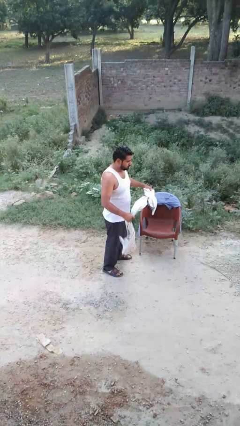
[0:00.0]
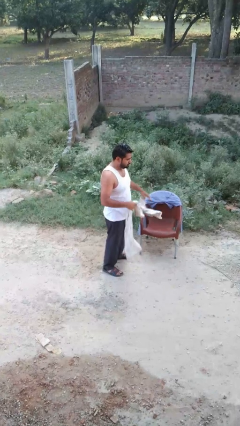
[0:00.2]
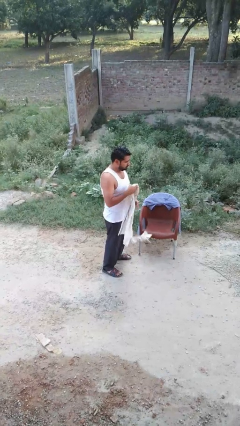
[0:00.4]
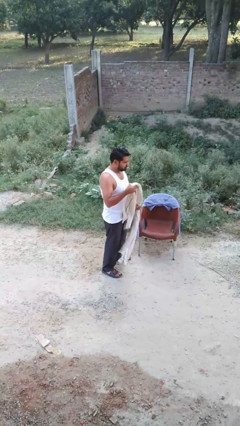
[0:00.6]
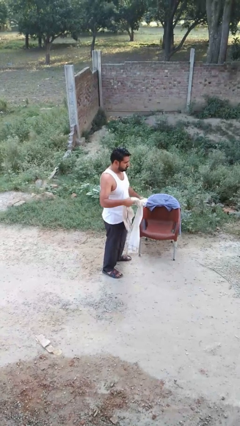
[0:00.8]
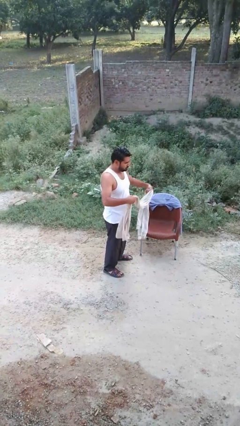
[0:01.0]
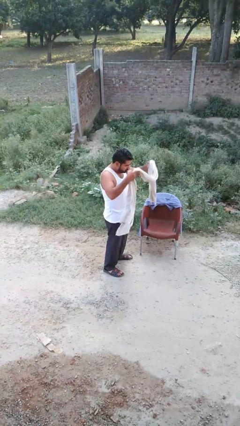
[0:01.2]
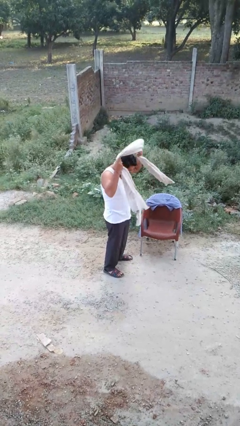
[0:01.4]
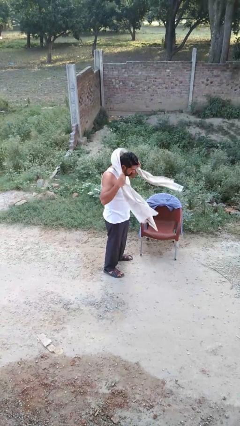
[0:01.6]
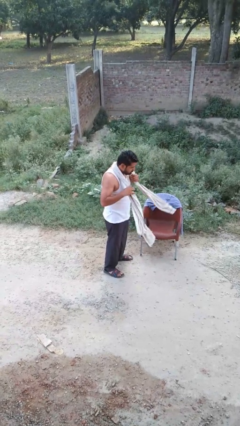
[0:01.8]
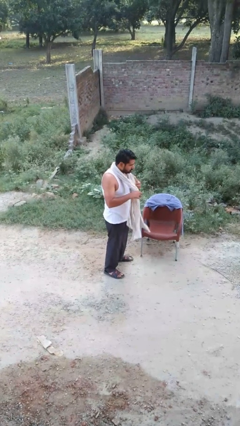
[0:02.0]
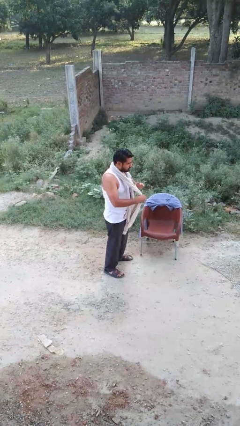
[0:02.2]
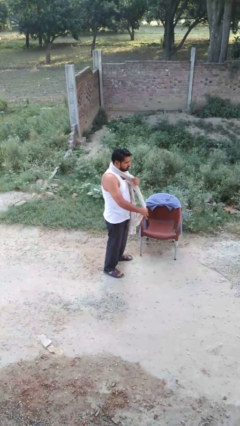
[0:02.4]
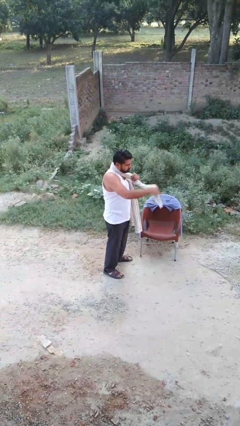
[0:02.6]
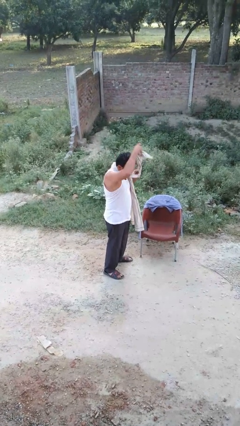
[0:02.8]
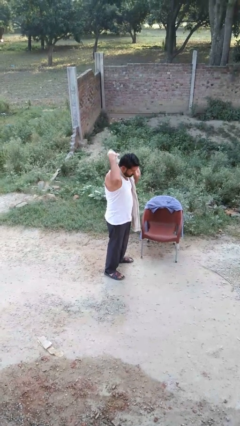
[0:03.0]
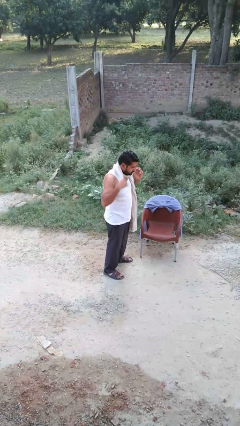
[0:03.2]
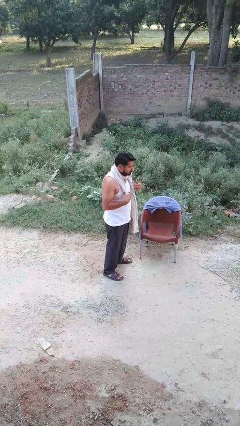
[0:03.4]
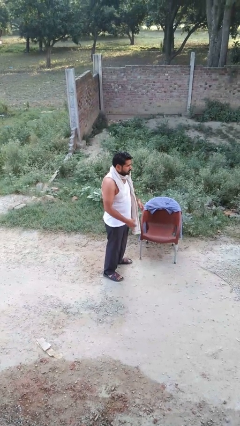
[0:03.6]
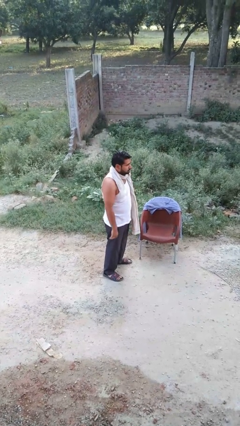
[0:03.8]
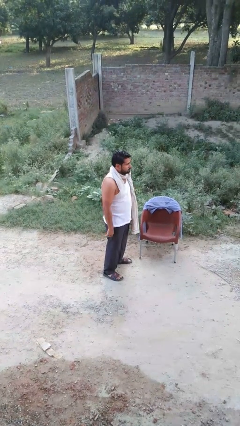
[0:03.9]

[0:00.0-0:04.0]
person puts on scarf

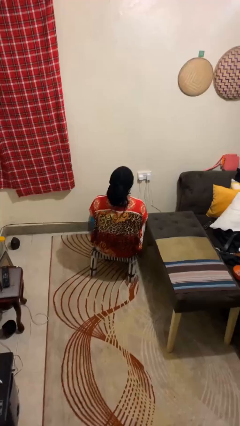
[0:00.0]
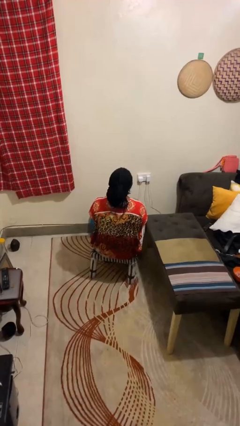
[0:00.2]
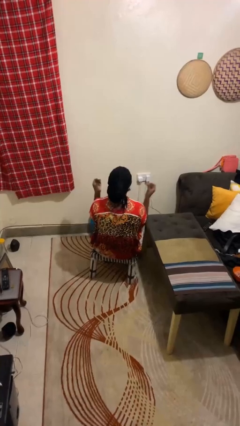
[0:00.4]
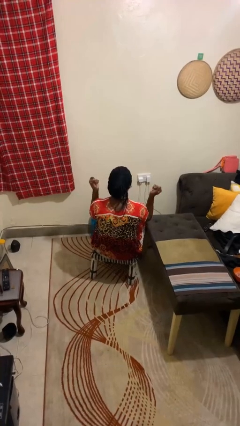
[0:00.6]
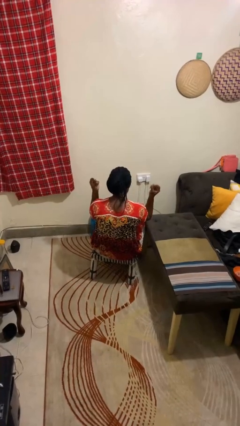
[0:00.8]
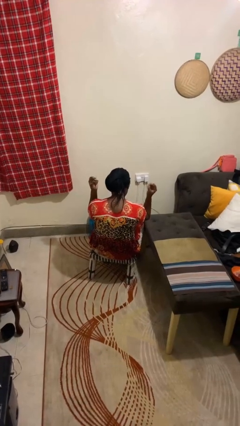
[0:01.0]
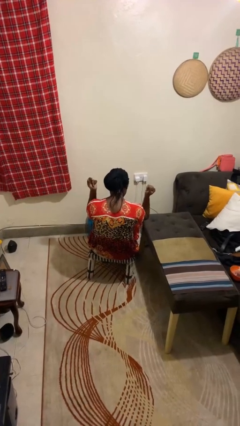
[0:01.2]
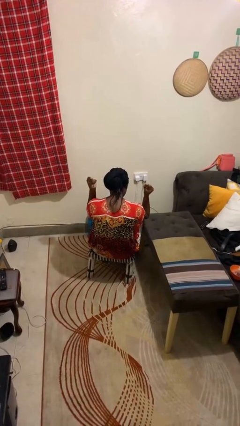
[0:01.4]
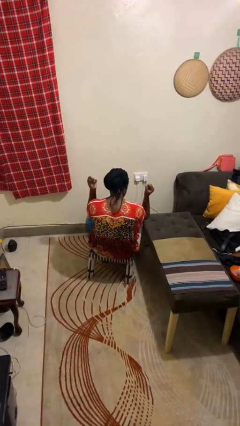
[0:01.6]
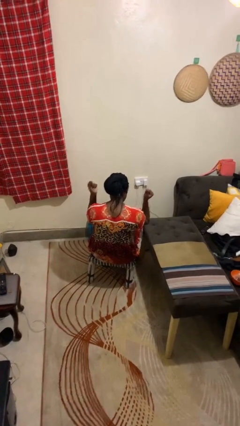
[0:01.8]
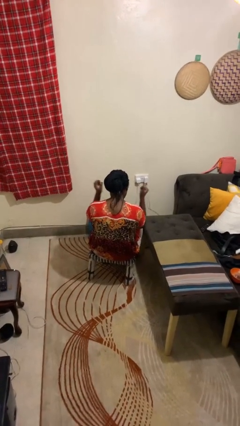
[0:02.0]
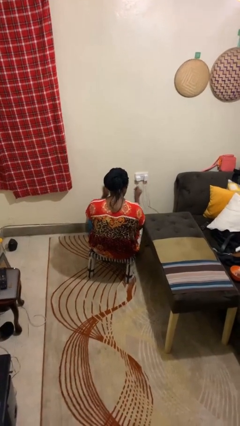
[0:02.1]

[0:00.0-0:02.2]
person snaps fingers

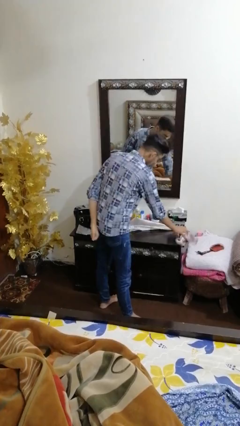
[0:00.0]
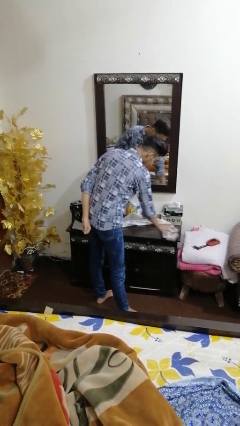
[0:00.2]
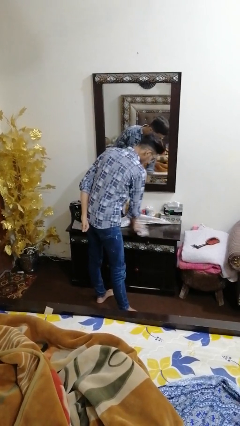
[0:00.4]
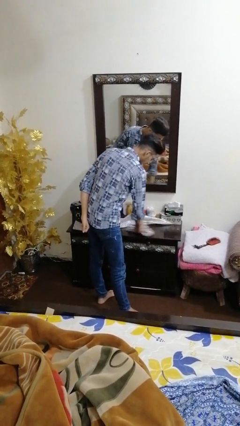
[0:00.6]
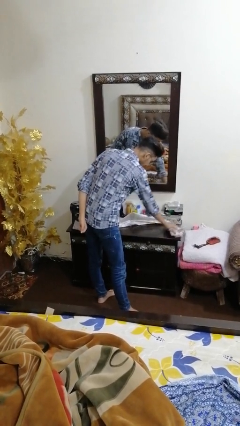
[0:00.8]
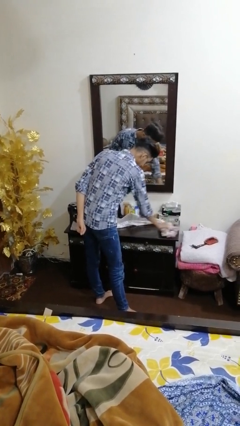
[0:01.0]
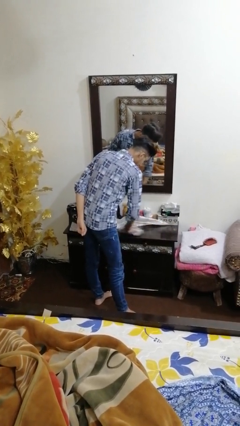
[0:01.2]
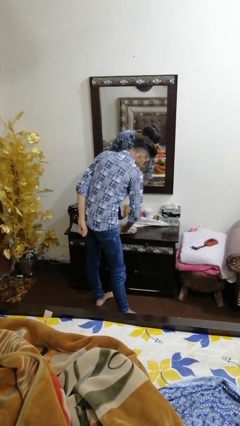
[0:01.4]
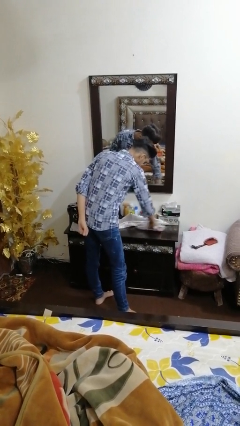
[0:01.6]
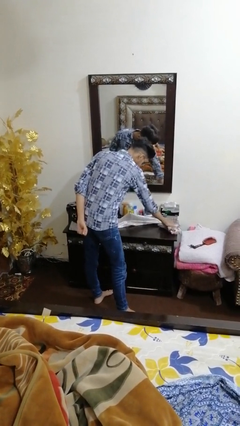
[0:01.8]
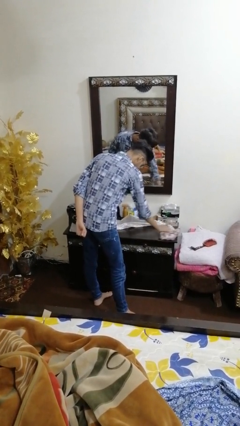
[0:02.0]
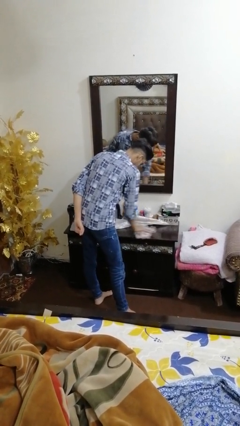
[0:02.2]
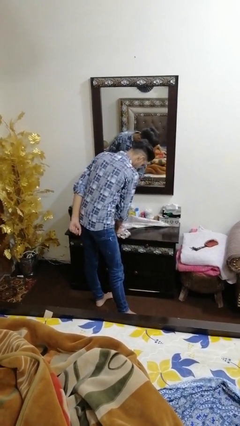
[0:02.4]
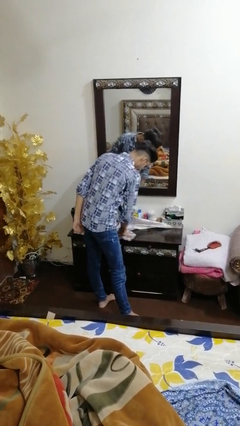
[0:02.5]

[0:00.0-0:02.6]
person cleans table with rag

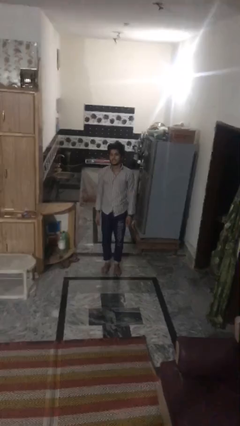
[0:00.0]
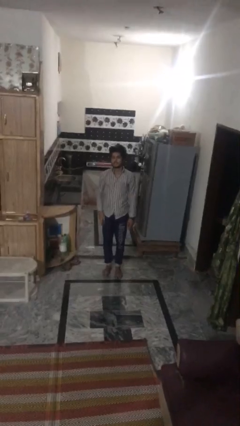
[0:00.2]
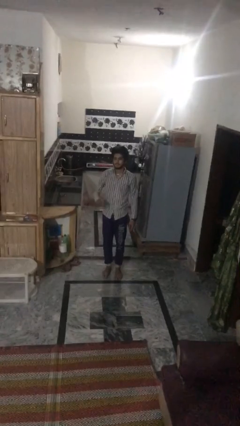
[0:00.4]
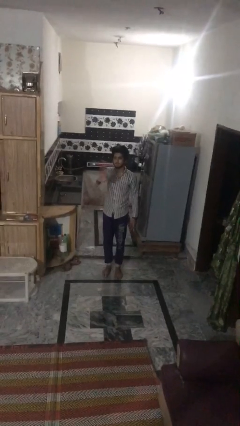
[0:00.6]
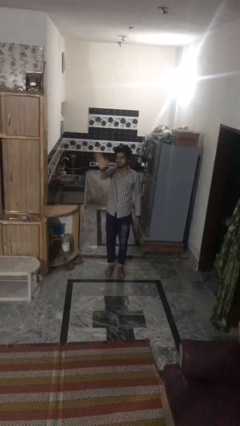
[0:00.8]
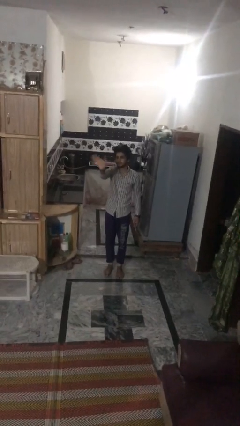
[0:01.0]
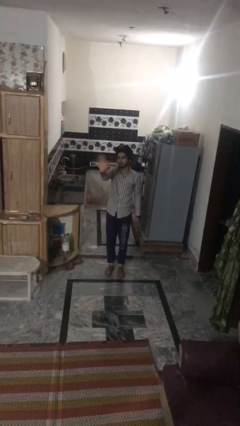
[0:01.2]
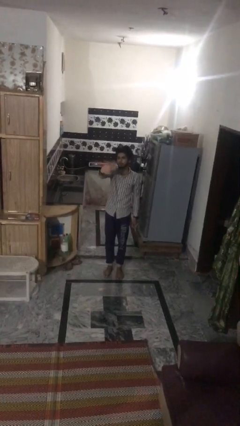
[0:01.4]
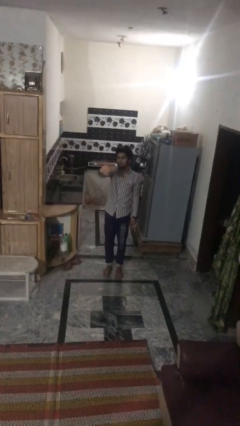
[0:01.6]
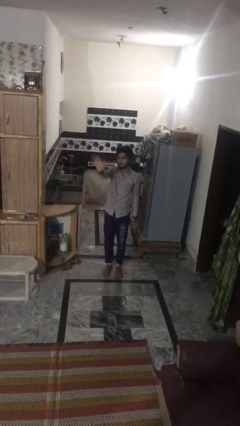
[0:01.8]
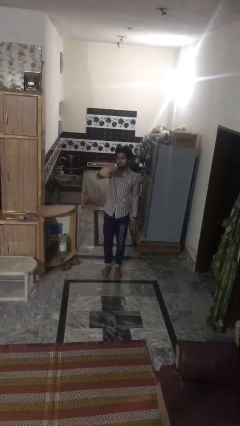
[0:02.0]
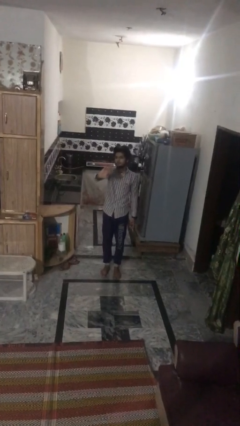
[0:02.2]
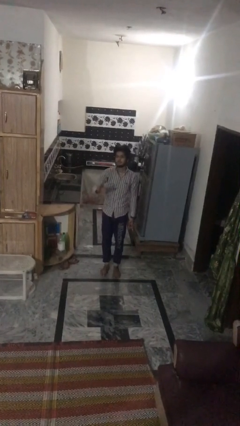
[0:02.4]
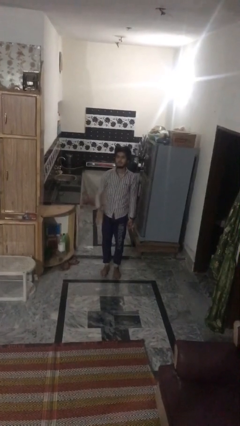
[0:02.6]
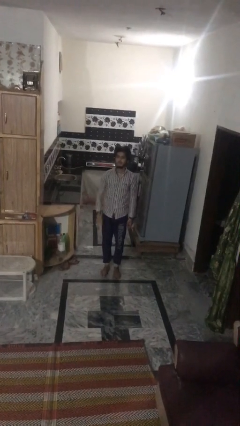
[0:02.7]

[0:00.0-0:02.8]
person waves at person

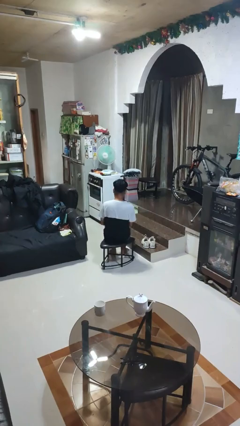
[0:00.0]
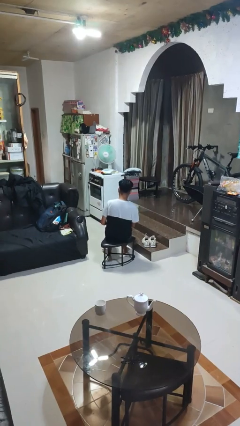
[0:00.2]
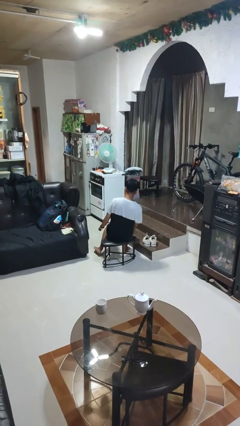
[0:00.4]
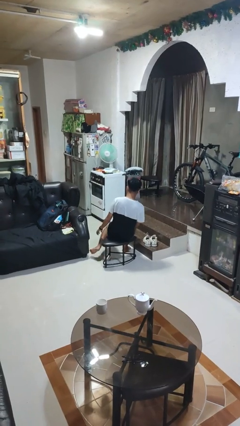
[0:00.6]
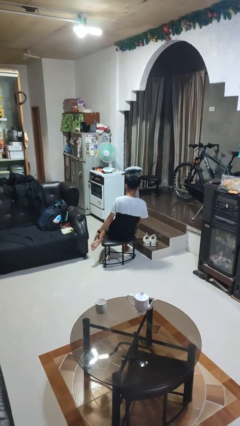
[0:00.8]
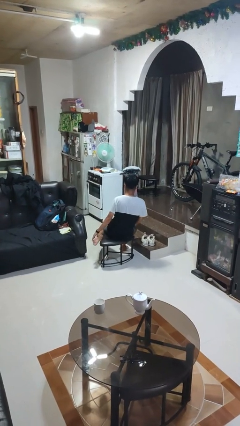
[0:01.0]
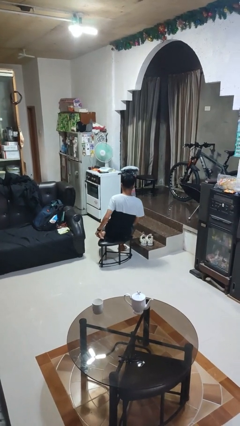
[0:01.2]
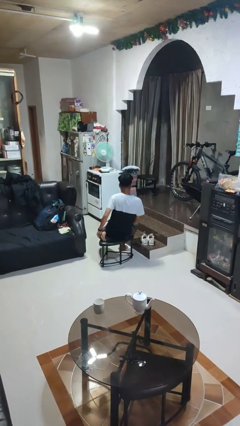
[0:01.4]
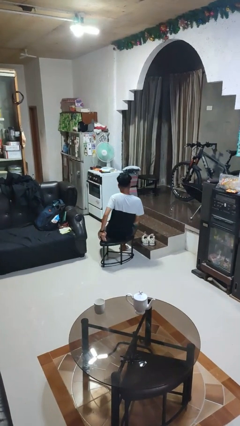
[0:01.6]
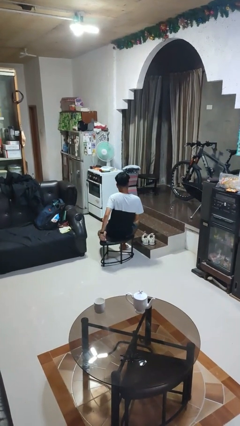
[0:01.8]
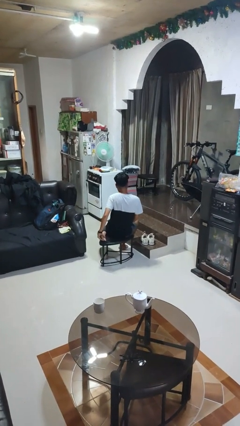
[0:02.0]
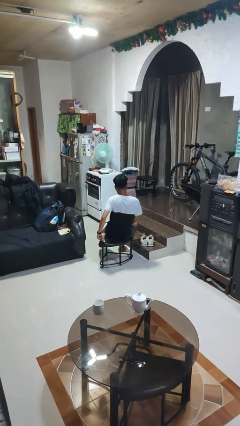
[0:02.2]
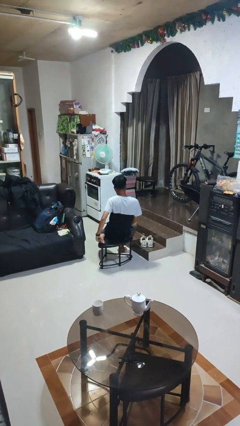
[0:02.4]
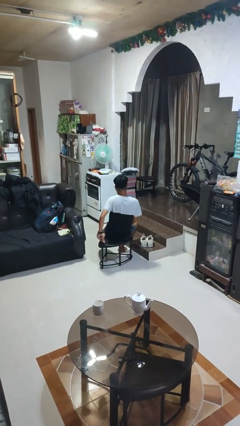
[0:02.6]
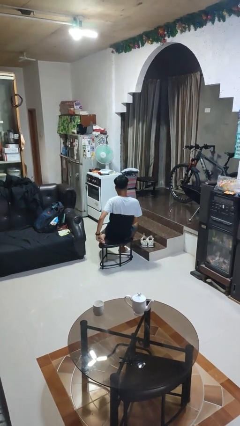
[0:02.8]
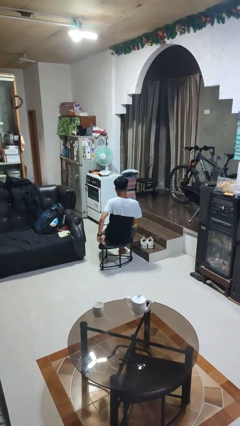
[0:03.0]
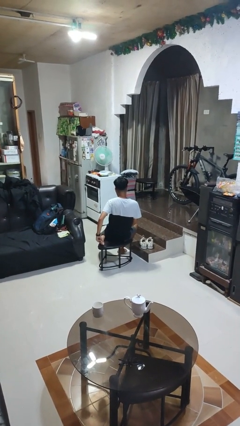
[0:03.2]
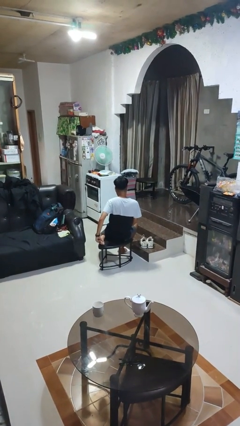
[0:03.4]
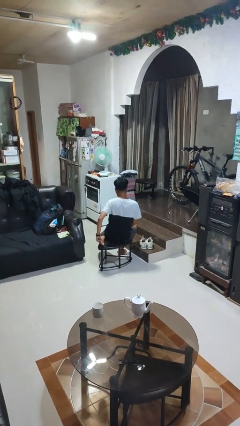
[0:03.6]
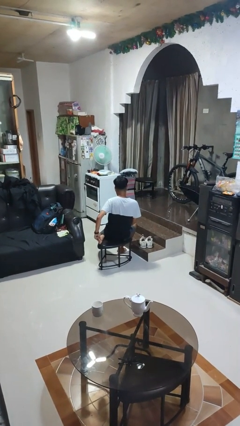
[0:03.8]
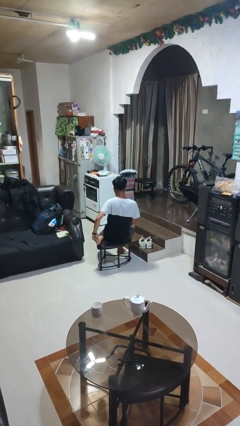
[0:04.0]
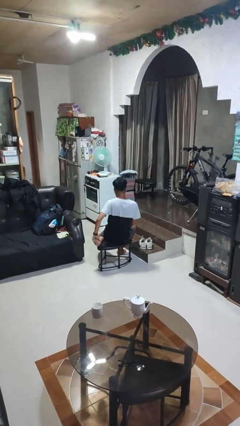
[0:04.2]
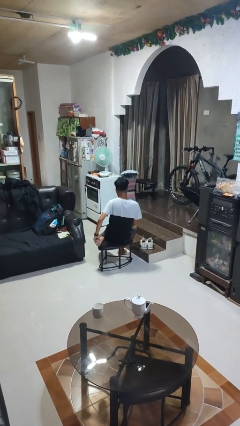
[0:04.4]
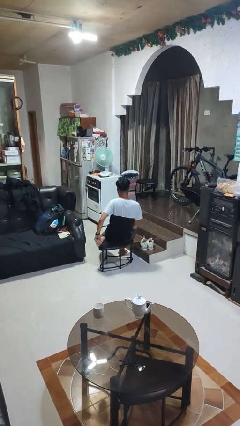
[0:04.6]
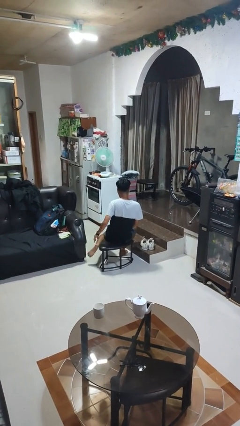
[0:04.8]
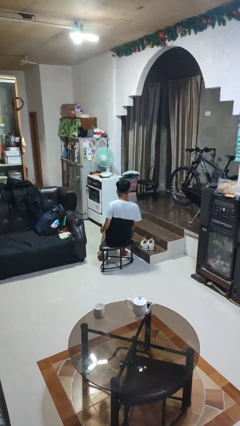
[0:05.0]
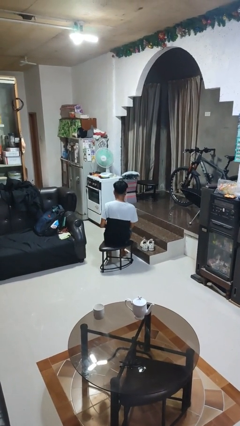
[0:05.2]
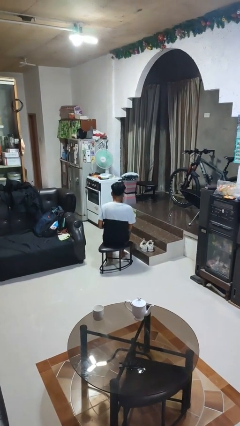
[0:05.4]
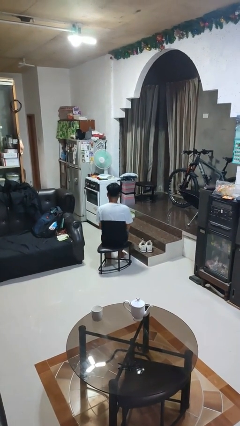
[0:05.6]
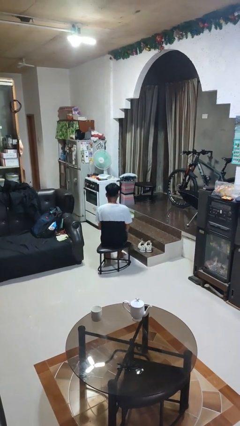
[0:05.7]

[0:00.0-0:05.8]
person rubs foot

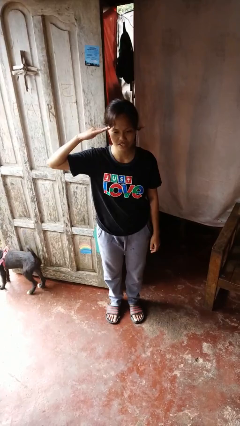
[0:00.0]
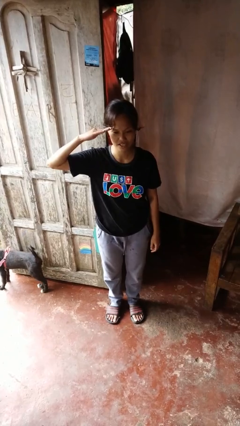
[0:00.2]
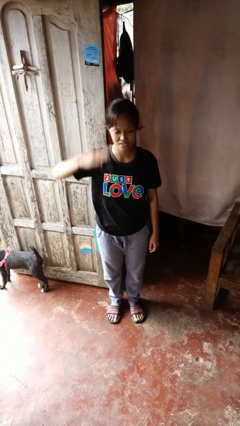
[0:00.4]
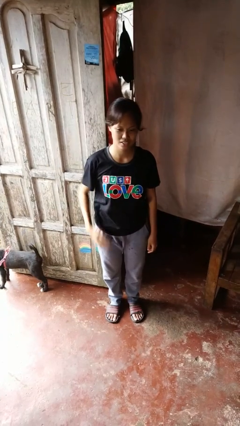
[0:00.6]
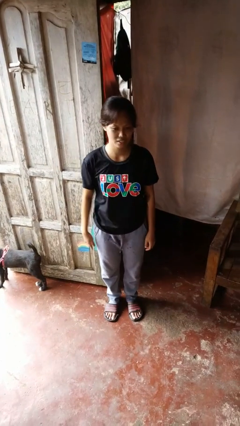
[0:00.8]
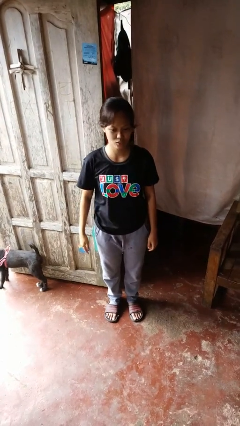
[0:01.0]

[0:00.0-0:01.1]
person salutes
